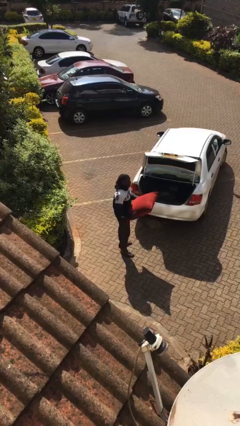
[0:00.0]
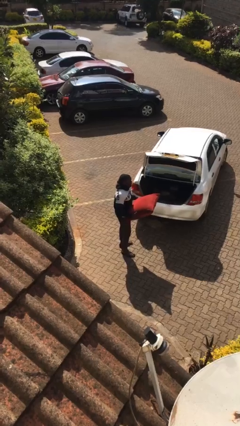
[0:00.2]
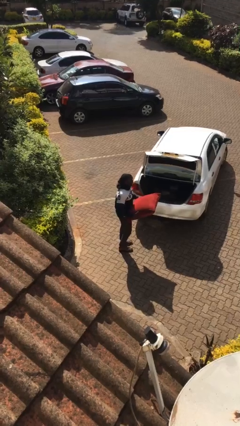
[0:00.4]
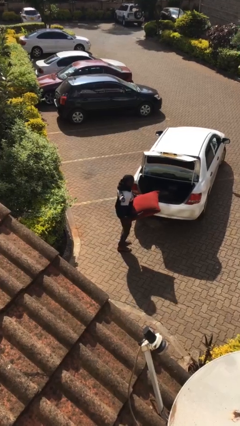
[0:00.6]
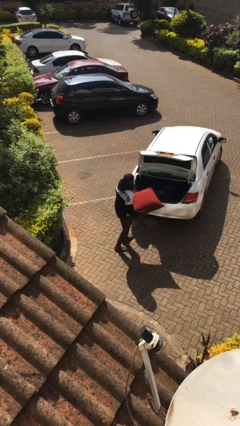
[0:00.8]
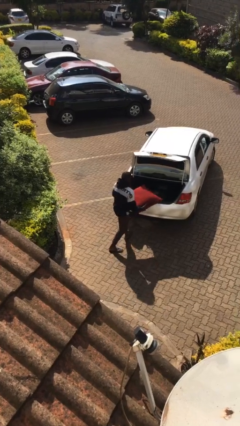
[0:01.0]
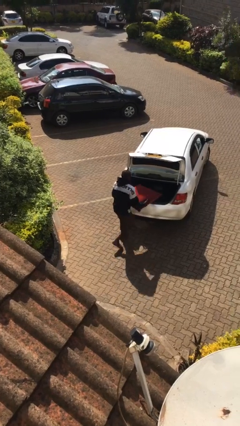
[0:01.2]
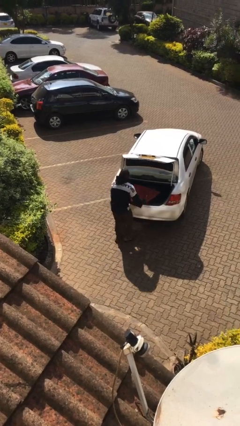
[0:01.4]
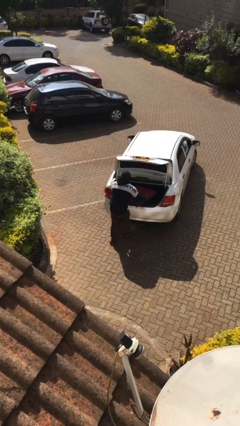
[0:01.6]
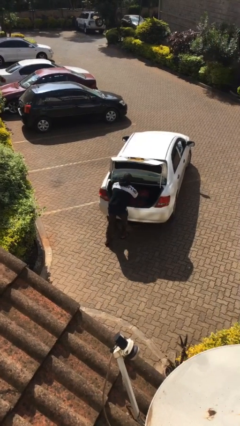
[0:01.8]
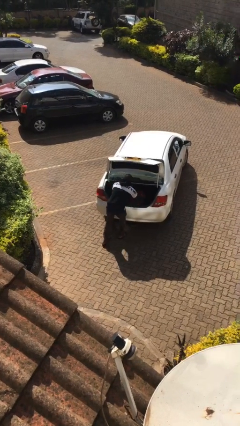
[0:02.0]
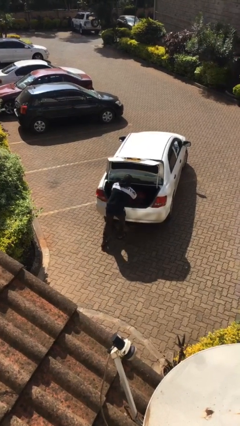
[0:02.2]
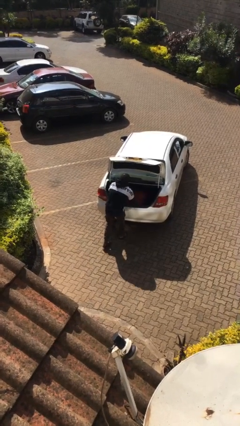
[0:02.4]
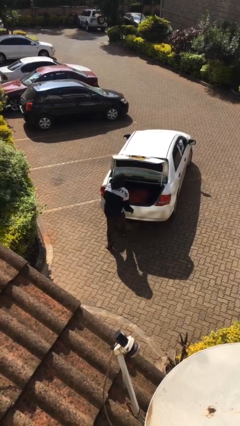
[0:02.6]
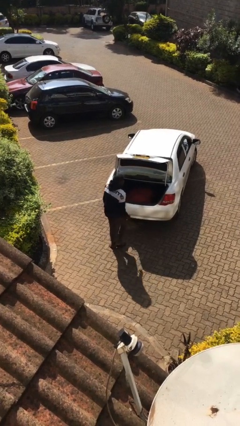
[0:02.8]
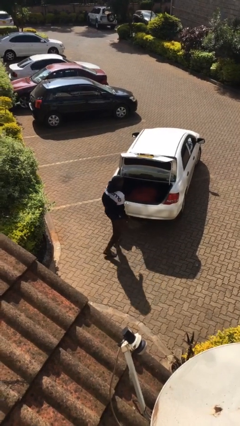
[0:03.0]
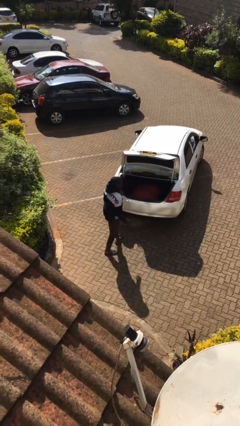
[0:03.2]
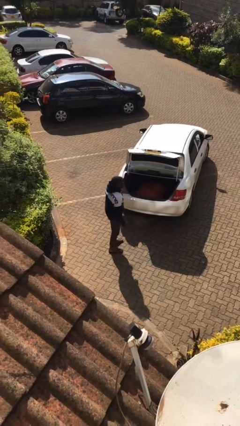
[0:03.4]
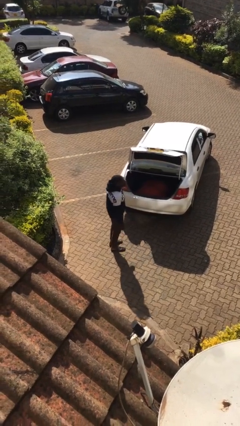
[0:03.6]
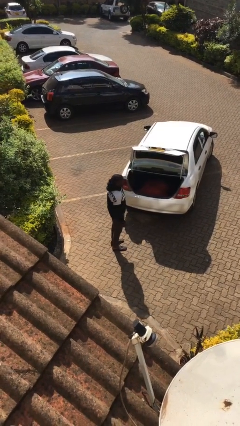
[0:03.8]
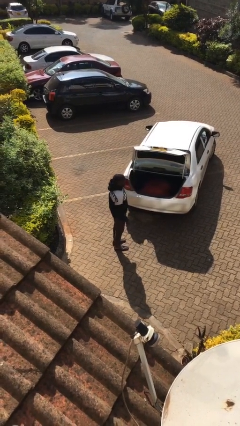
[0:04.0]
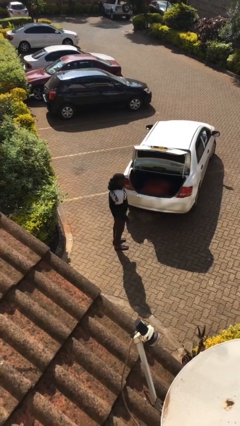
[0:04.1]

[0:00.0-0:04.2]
person loads car

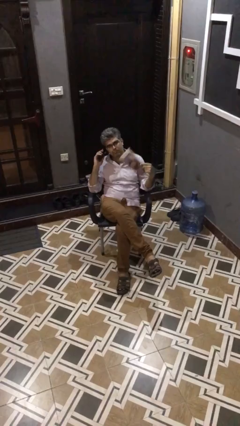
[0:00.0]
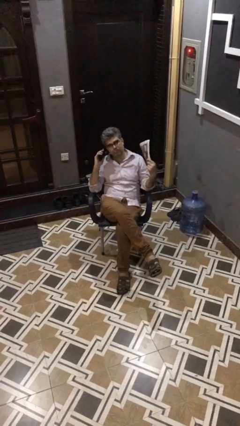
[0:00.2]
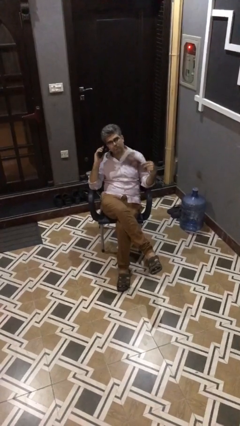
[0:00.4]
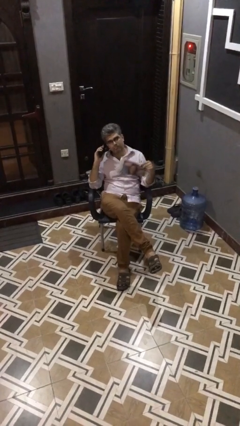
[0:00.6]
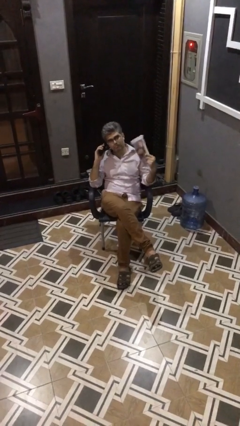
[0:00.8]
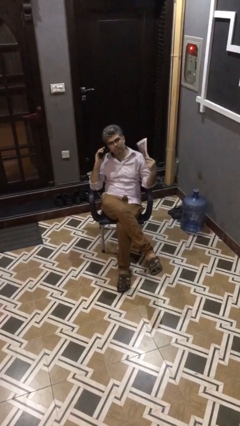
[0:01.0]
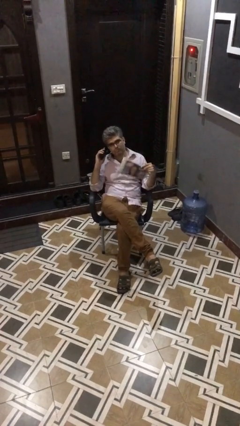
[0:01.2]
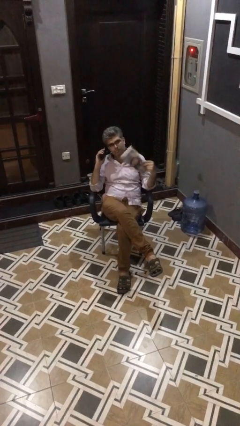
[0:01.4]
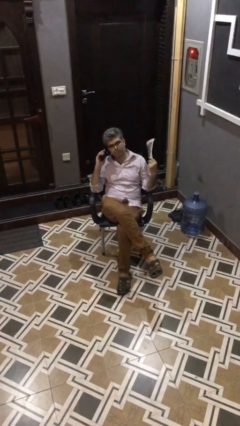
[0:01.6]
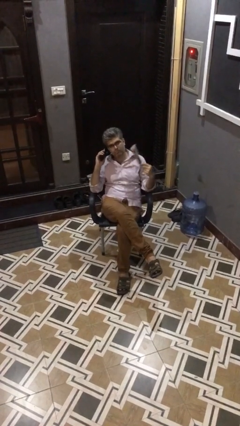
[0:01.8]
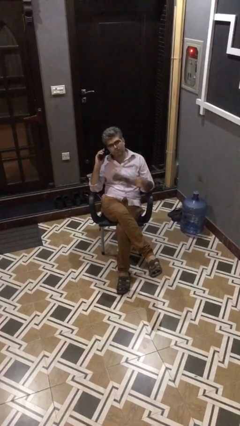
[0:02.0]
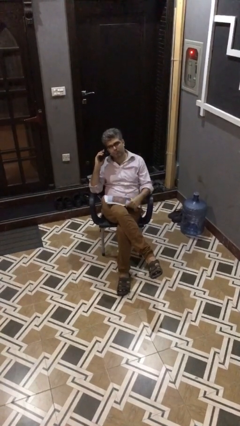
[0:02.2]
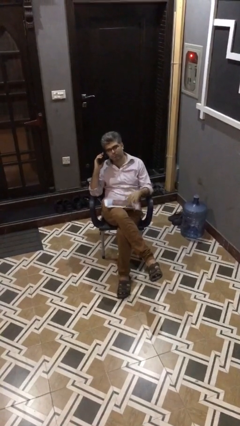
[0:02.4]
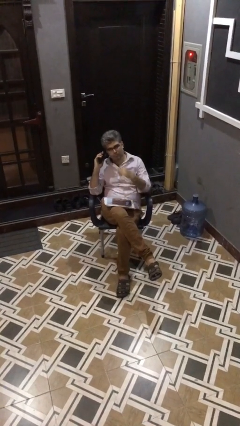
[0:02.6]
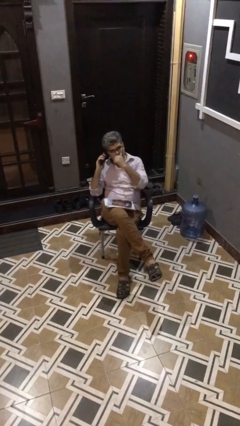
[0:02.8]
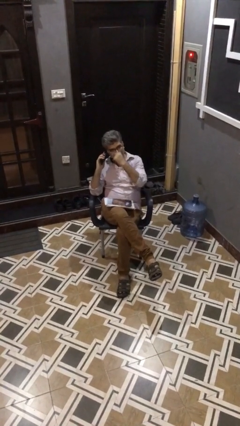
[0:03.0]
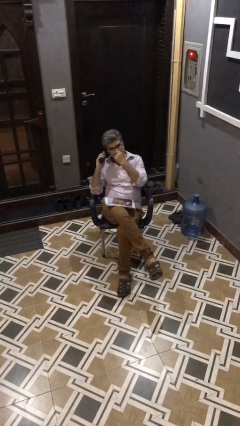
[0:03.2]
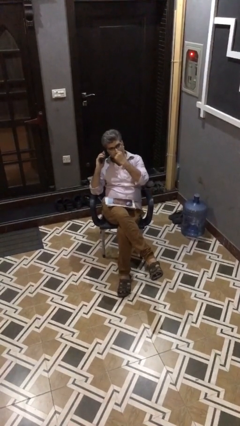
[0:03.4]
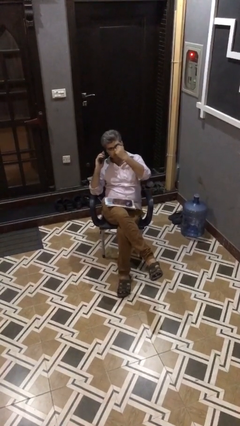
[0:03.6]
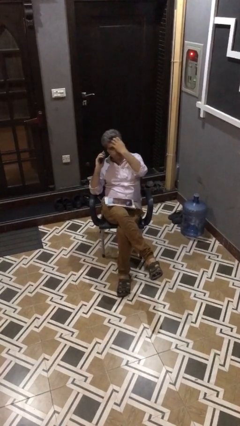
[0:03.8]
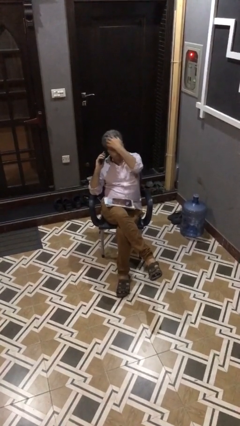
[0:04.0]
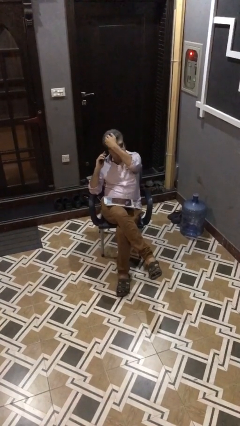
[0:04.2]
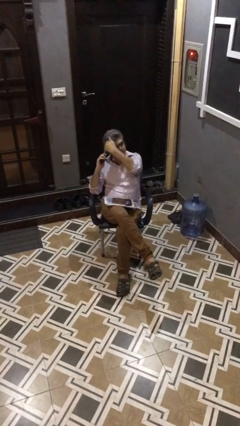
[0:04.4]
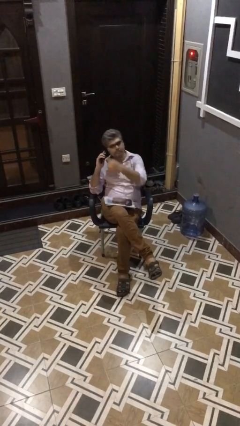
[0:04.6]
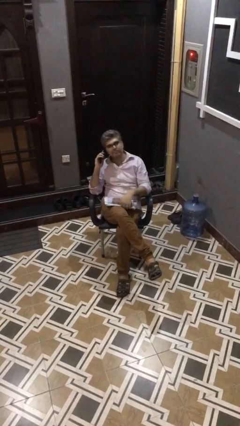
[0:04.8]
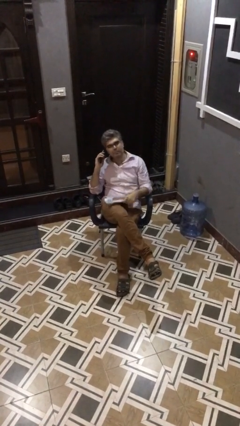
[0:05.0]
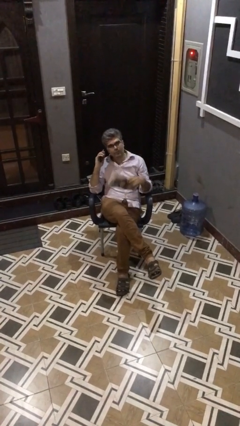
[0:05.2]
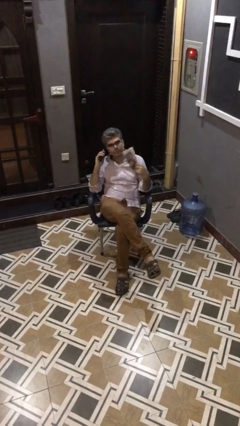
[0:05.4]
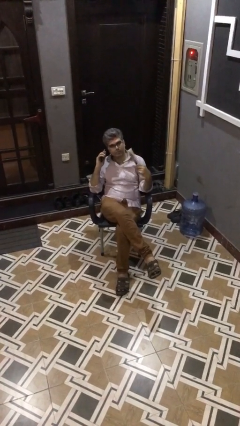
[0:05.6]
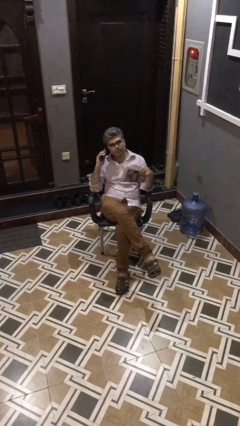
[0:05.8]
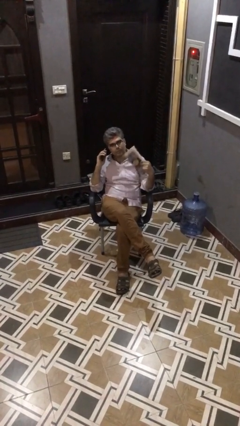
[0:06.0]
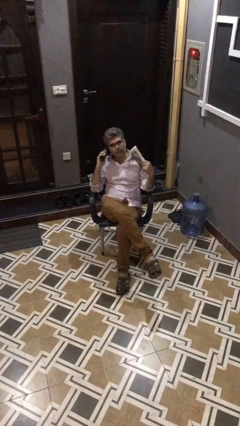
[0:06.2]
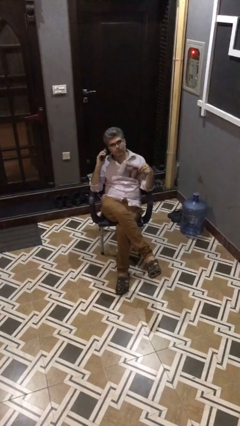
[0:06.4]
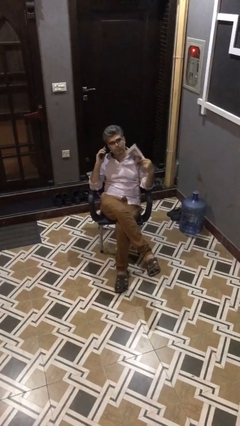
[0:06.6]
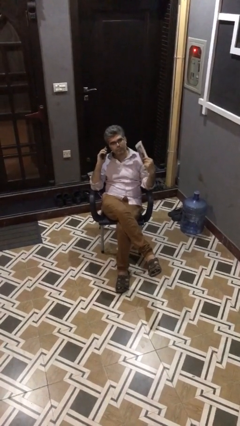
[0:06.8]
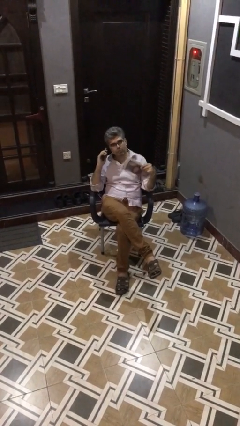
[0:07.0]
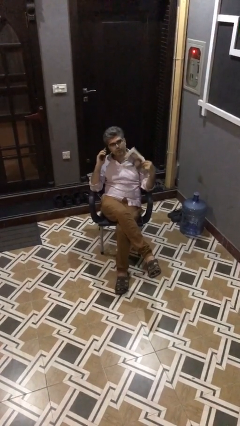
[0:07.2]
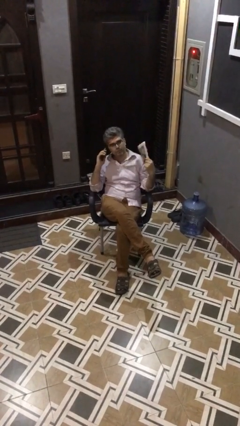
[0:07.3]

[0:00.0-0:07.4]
person talks on phone

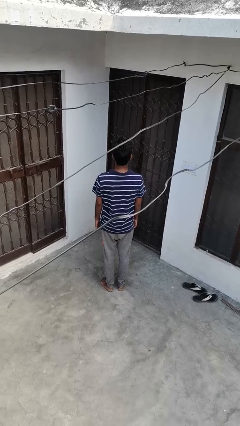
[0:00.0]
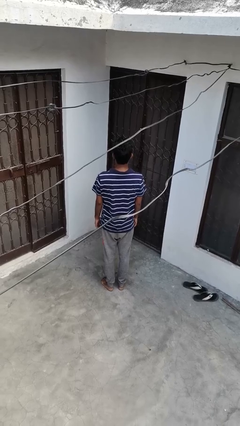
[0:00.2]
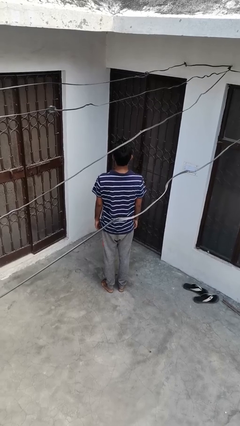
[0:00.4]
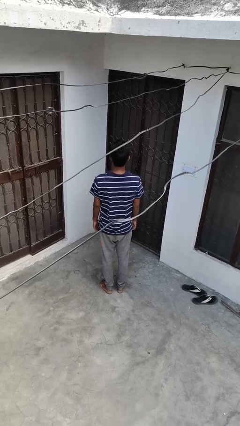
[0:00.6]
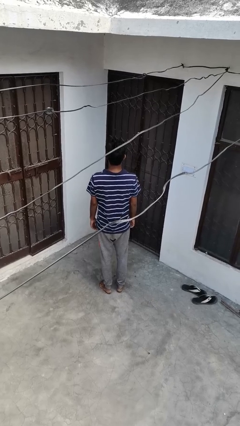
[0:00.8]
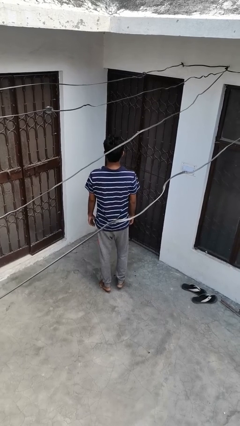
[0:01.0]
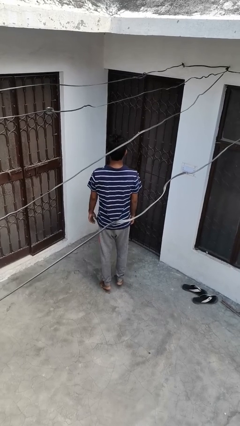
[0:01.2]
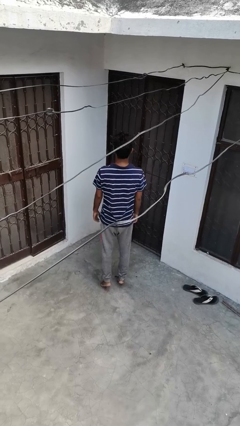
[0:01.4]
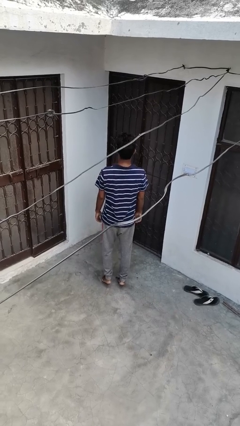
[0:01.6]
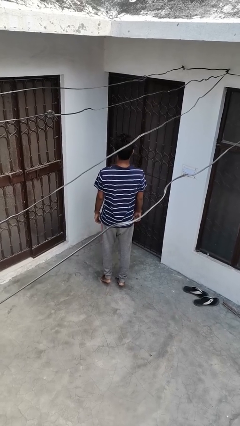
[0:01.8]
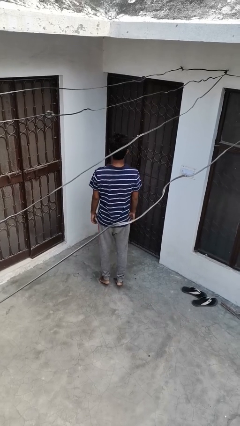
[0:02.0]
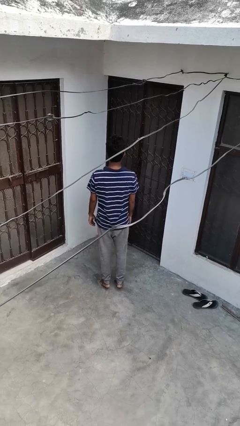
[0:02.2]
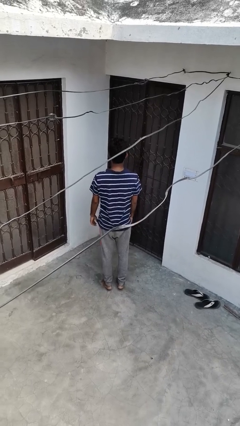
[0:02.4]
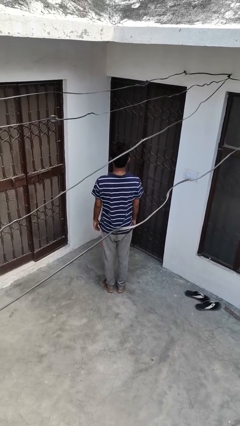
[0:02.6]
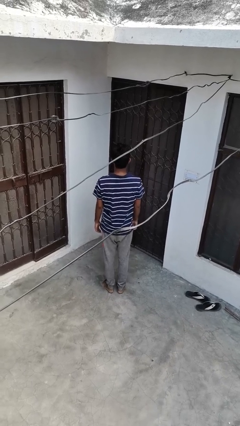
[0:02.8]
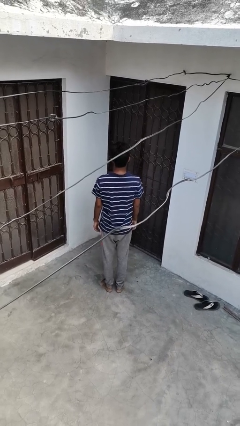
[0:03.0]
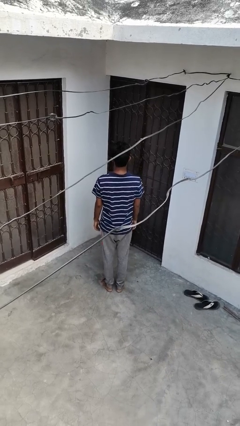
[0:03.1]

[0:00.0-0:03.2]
person walks tiptoe

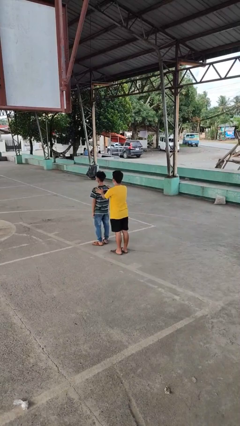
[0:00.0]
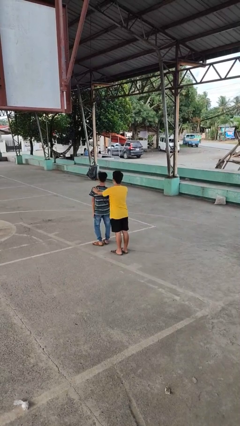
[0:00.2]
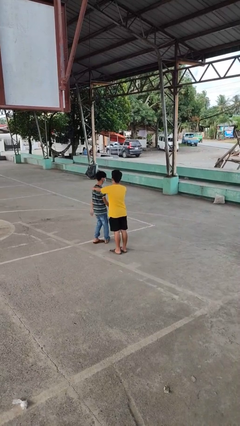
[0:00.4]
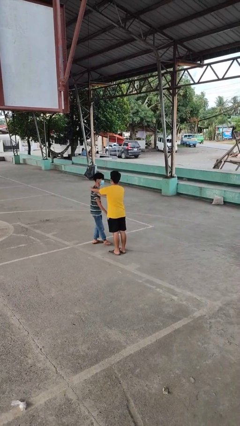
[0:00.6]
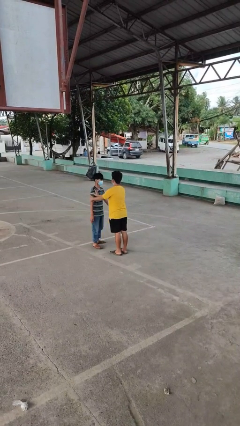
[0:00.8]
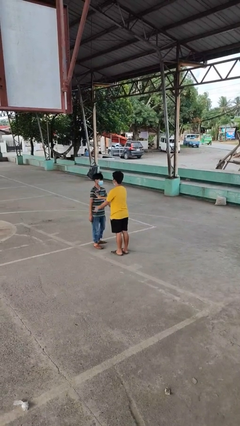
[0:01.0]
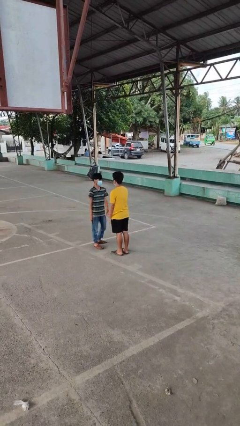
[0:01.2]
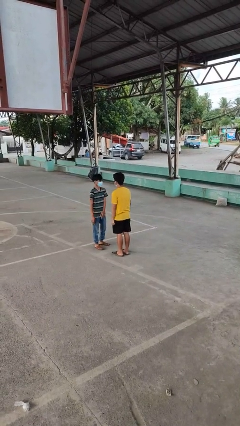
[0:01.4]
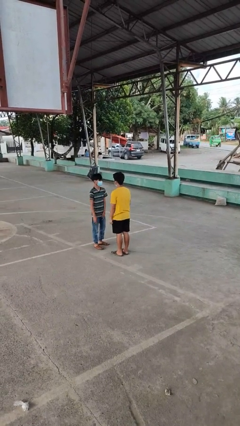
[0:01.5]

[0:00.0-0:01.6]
person spins person around

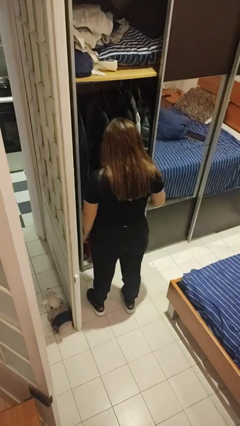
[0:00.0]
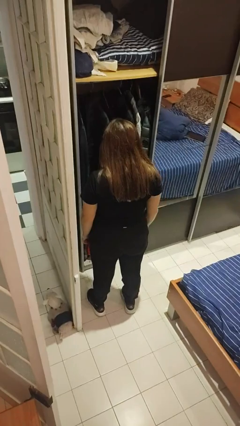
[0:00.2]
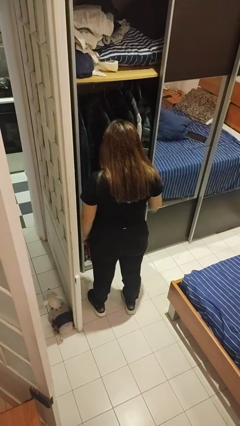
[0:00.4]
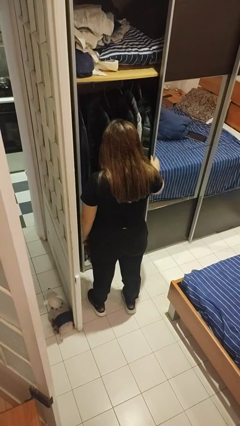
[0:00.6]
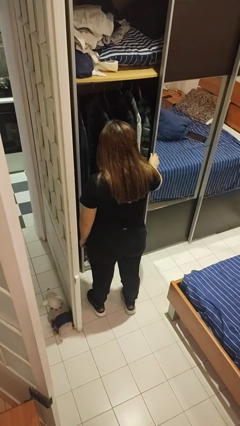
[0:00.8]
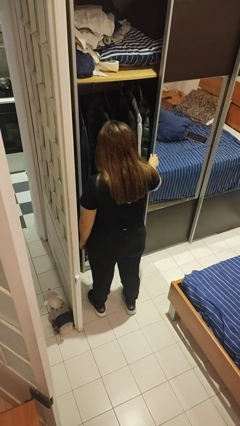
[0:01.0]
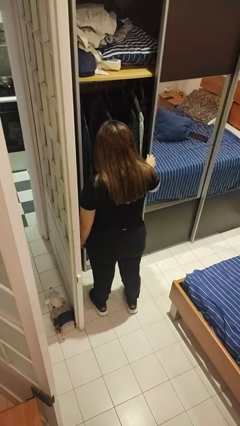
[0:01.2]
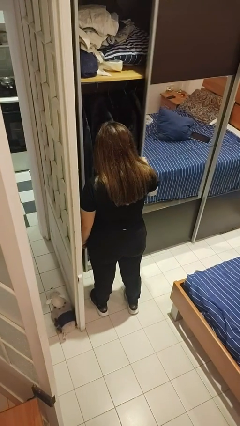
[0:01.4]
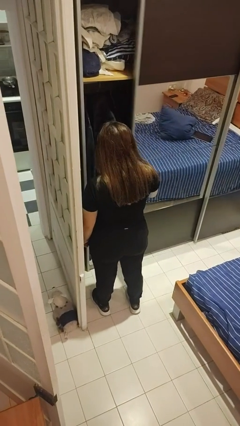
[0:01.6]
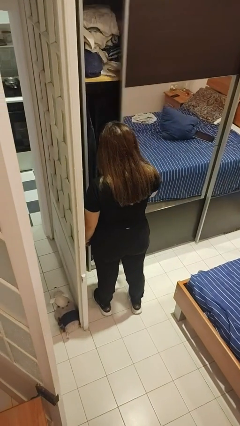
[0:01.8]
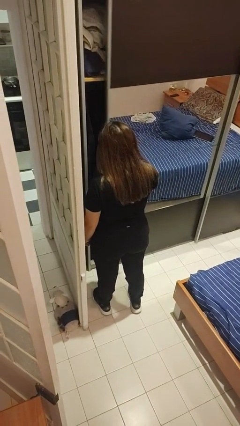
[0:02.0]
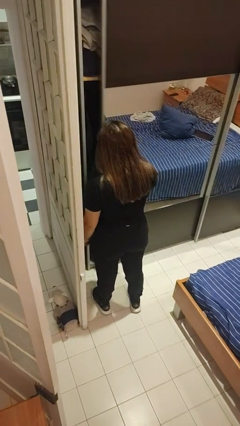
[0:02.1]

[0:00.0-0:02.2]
person closes dresser drawer
